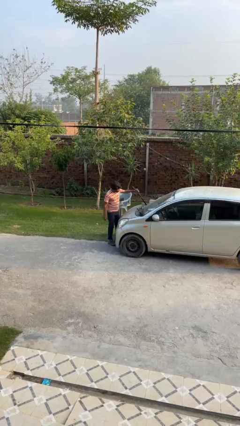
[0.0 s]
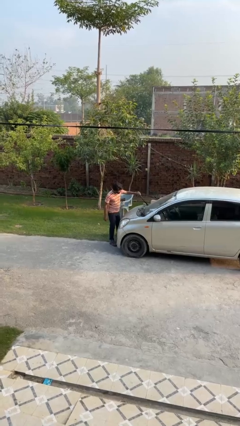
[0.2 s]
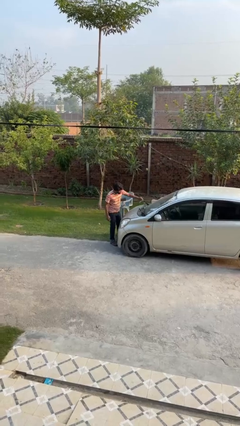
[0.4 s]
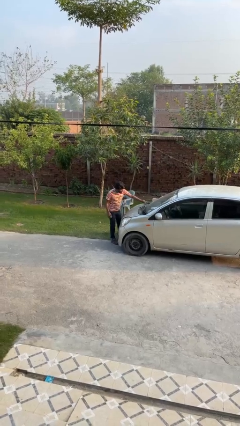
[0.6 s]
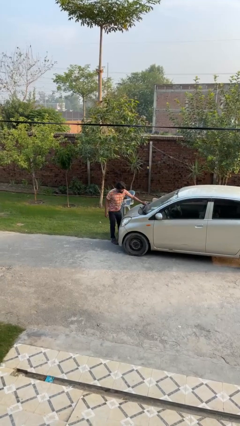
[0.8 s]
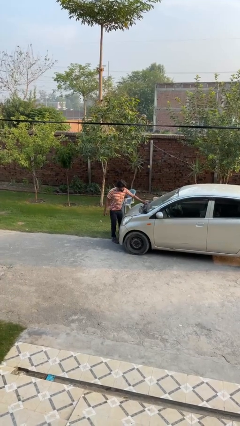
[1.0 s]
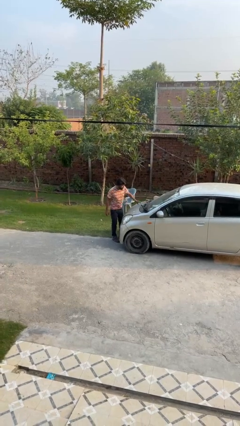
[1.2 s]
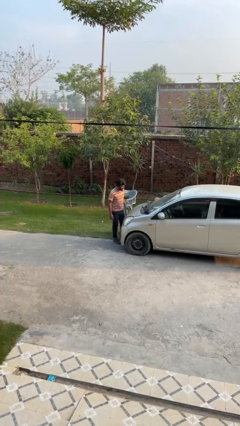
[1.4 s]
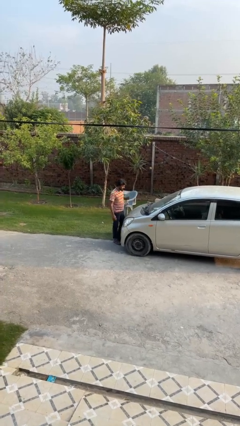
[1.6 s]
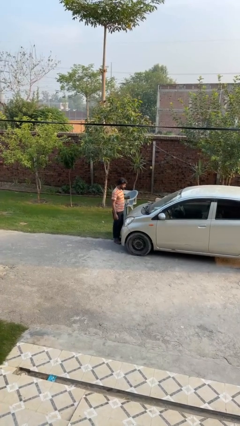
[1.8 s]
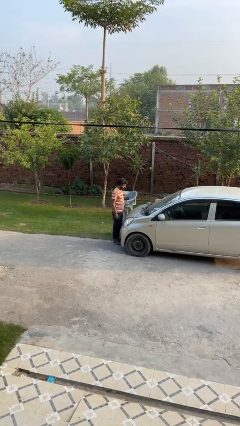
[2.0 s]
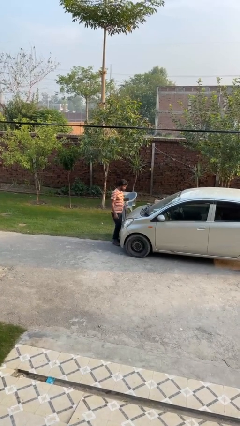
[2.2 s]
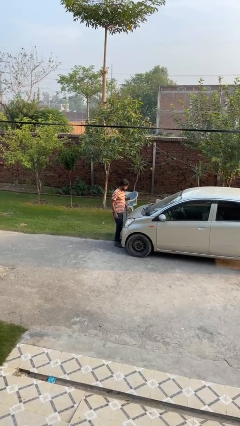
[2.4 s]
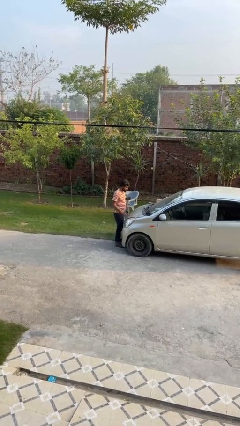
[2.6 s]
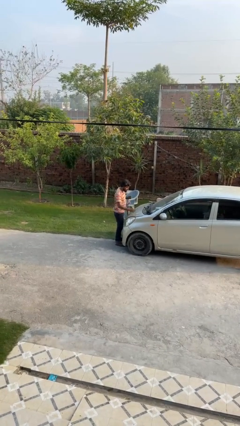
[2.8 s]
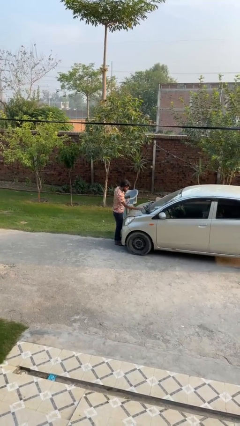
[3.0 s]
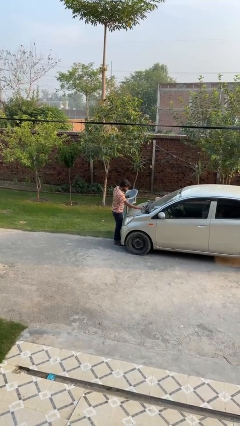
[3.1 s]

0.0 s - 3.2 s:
person flips down car wipers

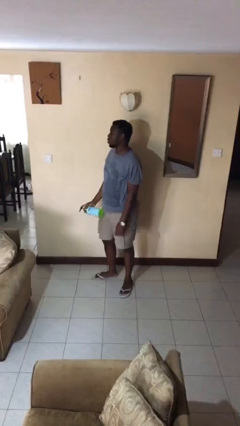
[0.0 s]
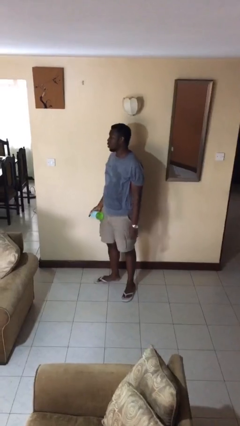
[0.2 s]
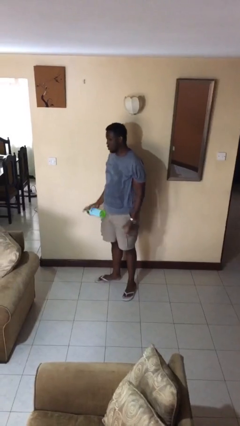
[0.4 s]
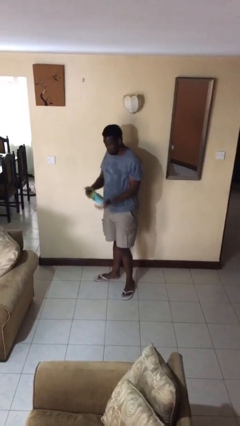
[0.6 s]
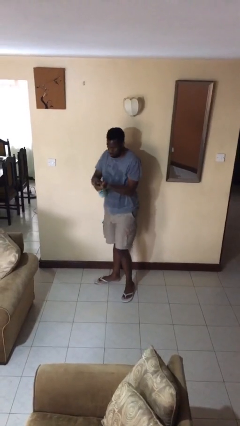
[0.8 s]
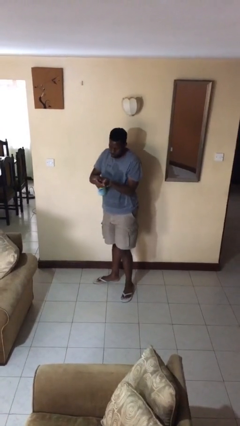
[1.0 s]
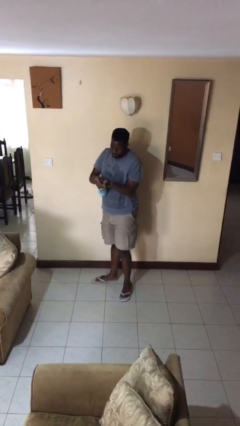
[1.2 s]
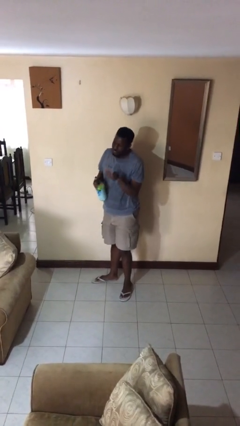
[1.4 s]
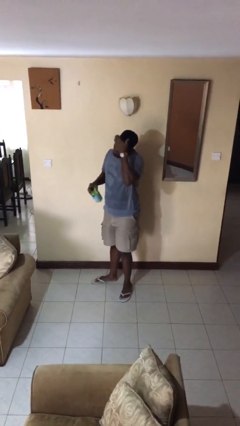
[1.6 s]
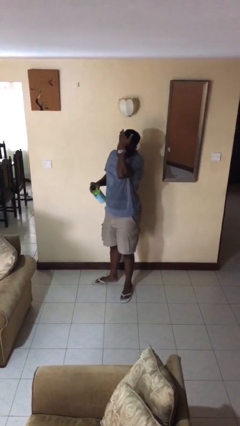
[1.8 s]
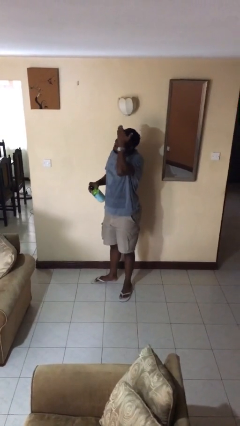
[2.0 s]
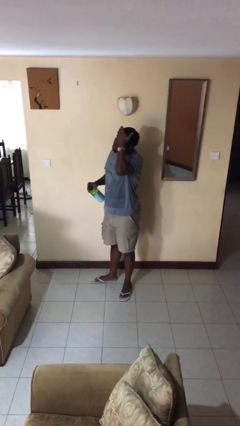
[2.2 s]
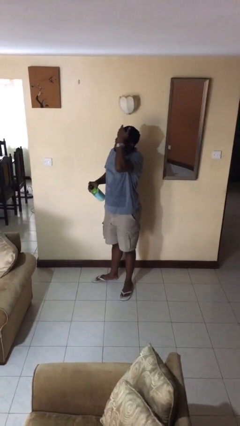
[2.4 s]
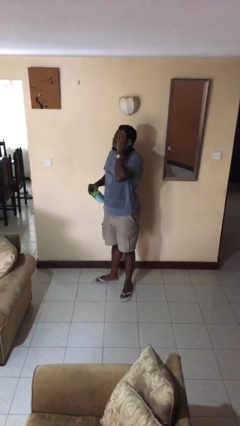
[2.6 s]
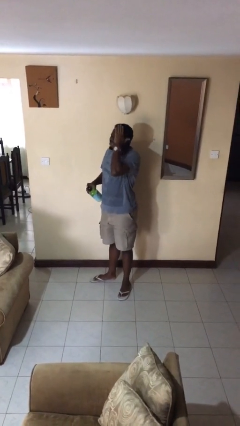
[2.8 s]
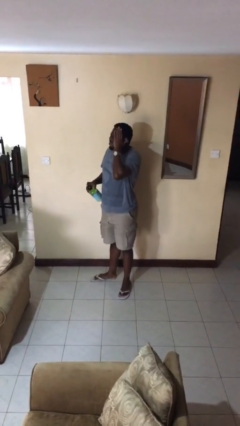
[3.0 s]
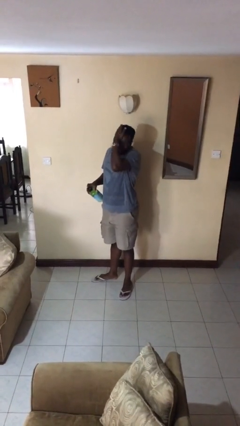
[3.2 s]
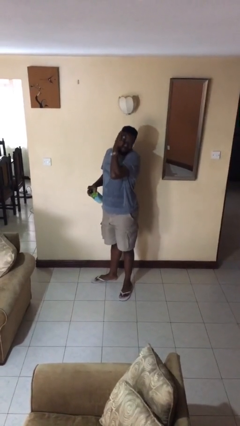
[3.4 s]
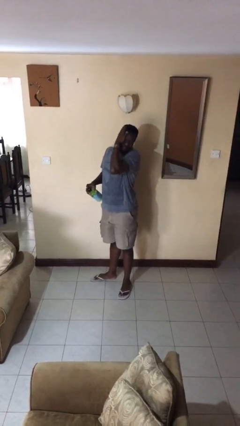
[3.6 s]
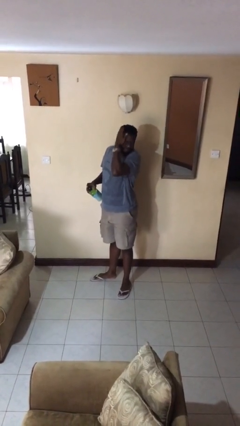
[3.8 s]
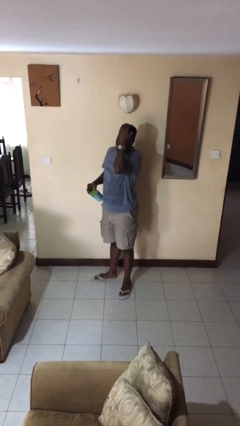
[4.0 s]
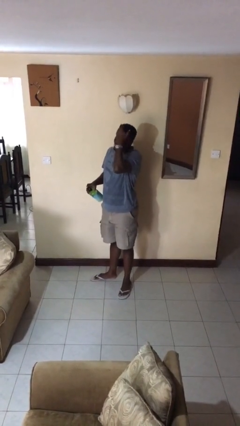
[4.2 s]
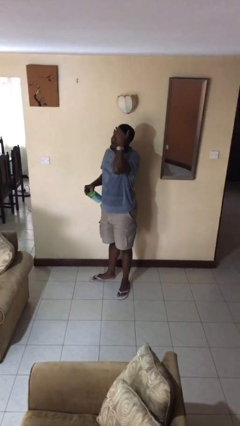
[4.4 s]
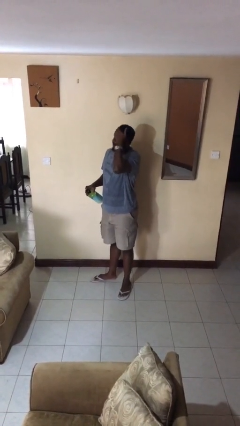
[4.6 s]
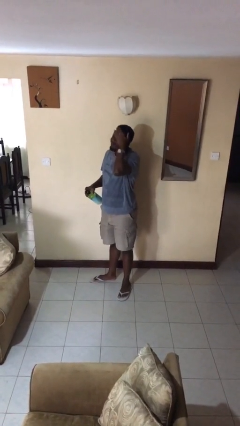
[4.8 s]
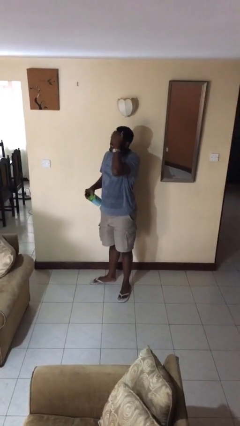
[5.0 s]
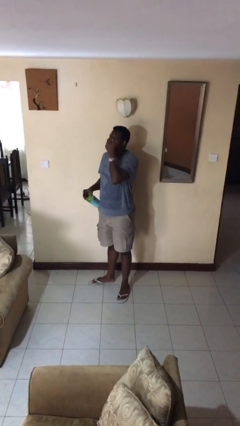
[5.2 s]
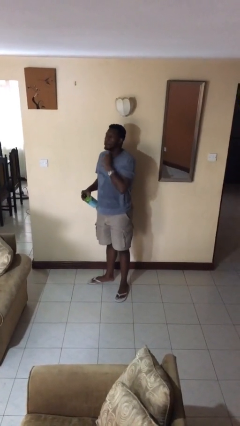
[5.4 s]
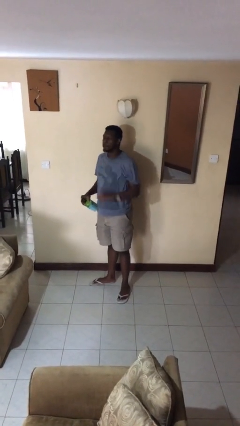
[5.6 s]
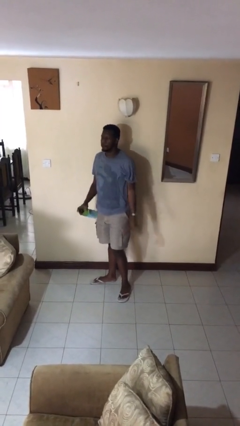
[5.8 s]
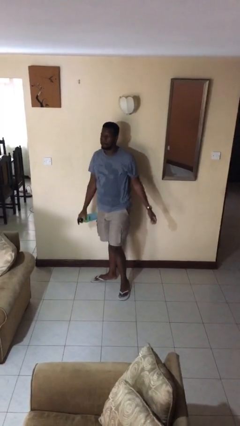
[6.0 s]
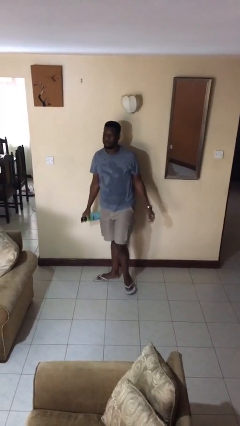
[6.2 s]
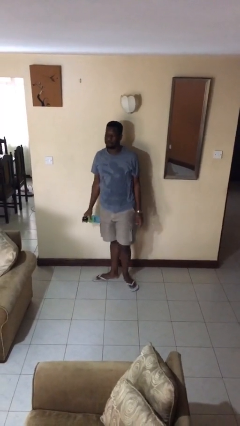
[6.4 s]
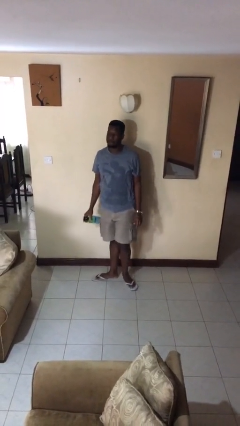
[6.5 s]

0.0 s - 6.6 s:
person applies sunscreen

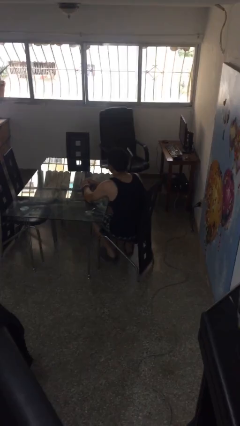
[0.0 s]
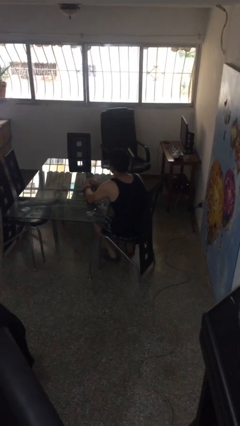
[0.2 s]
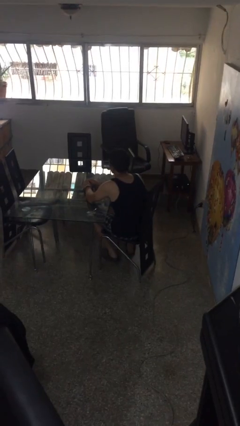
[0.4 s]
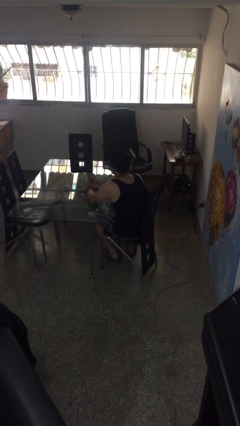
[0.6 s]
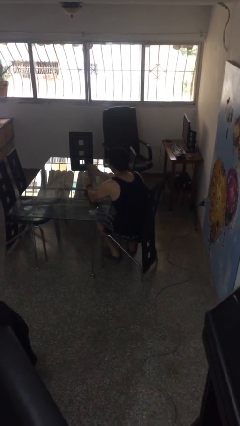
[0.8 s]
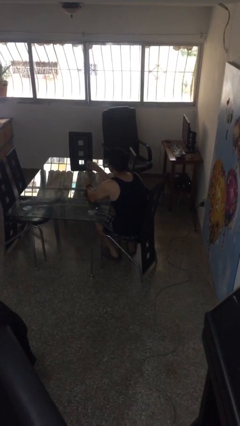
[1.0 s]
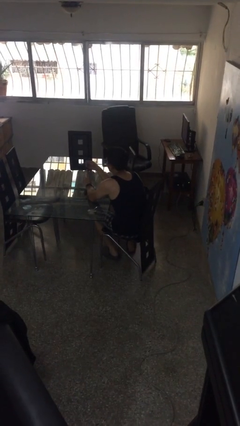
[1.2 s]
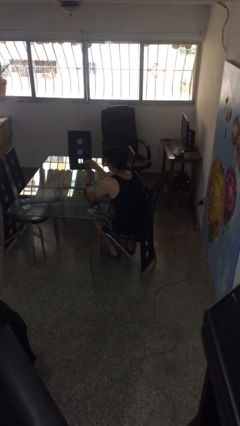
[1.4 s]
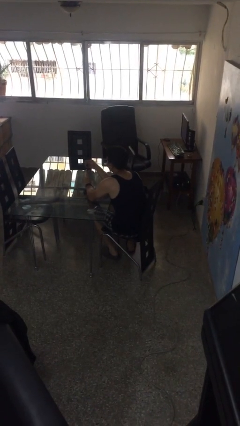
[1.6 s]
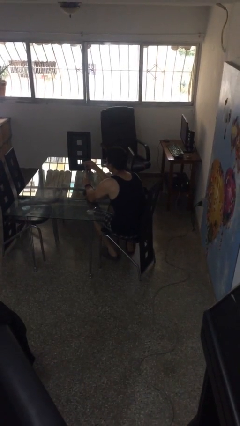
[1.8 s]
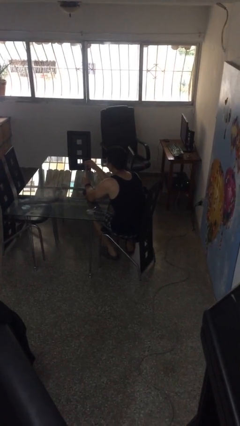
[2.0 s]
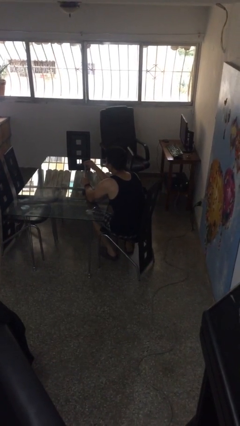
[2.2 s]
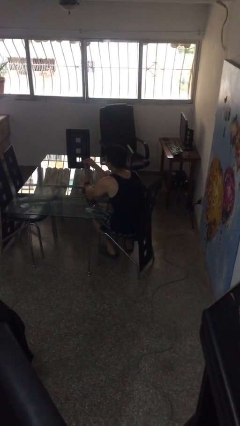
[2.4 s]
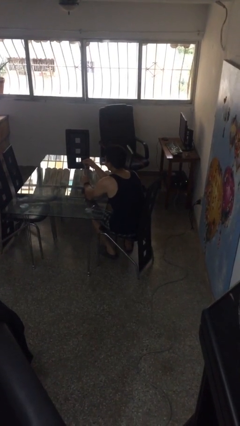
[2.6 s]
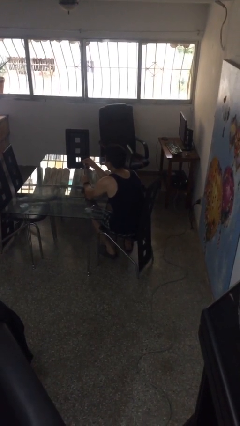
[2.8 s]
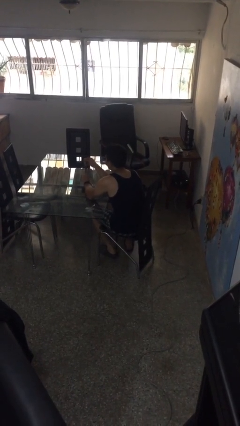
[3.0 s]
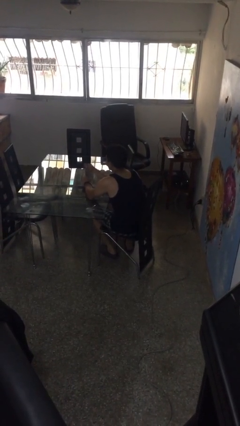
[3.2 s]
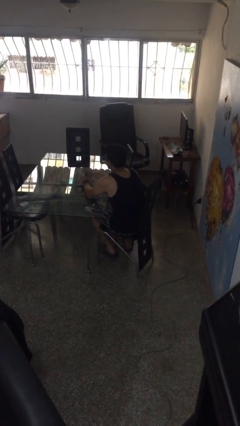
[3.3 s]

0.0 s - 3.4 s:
person clips fingernails

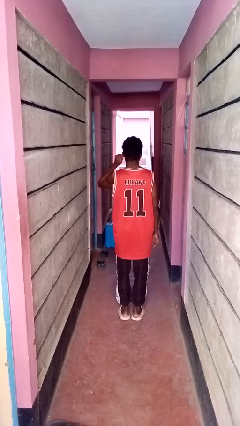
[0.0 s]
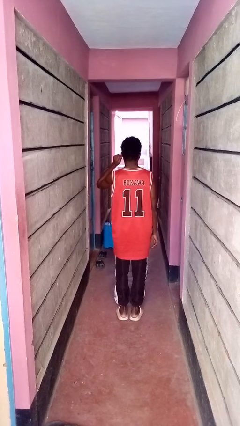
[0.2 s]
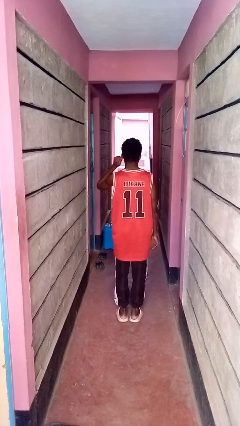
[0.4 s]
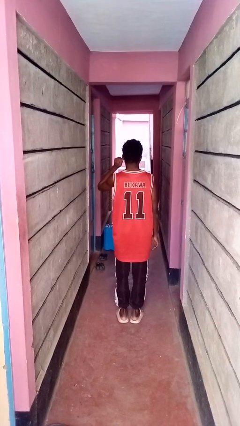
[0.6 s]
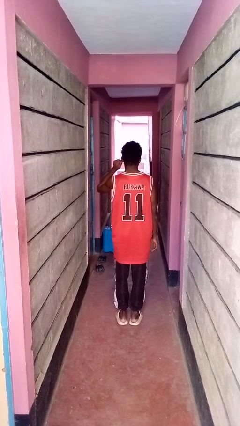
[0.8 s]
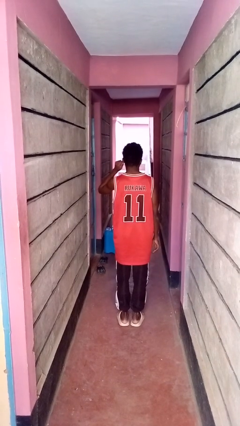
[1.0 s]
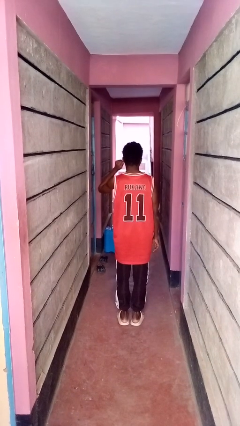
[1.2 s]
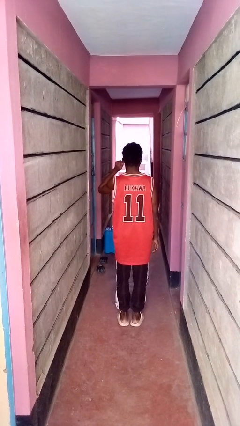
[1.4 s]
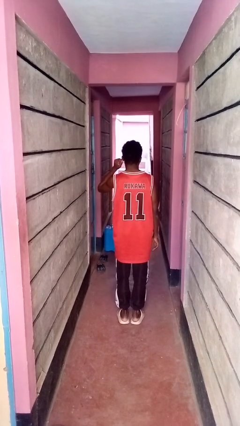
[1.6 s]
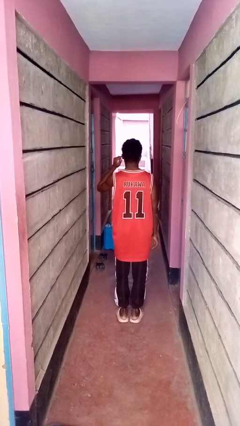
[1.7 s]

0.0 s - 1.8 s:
person touches earlobe

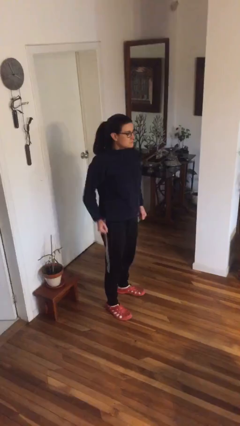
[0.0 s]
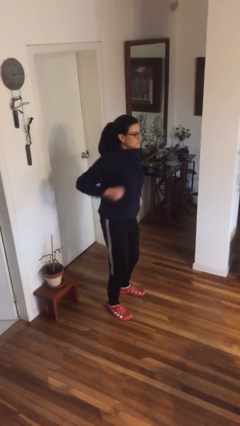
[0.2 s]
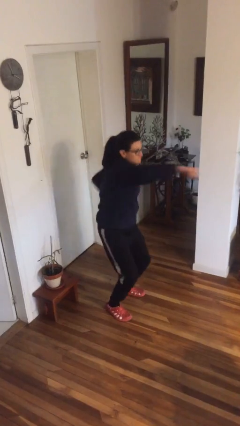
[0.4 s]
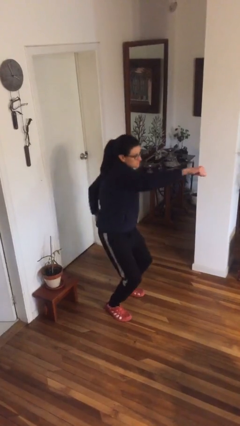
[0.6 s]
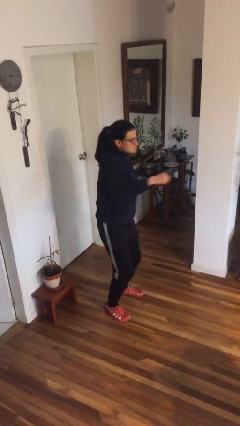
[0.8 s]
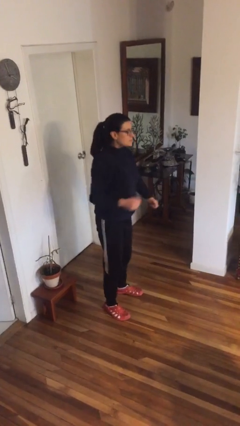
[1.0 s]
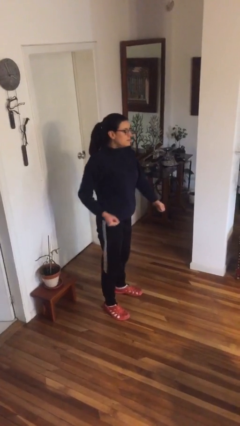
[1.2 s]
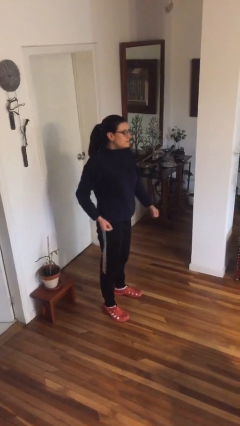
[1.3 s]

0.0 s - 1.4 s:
person punches

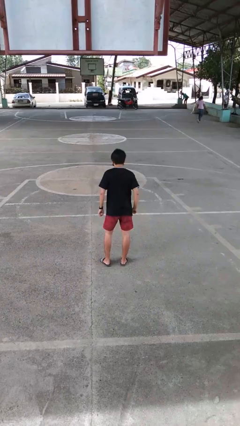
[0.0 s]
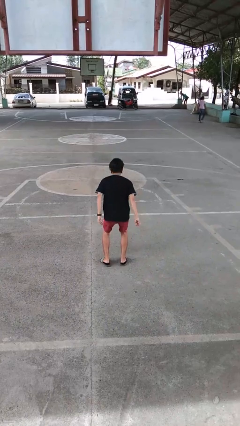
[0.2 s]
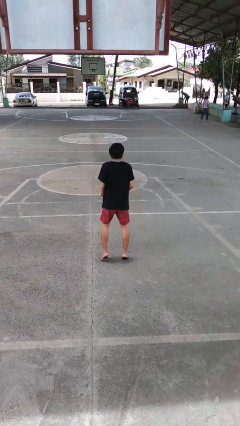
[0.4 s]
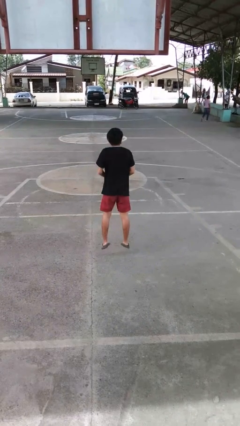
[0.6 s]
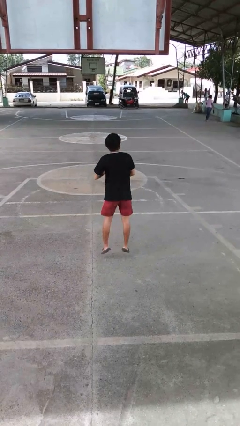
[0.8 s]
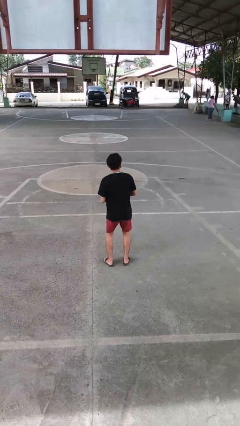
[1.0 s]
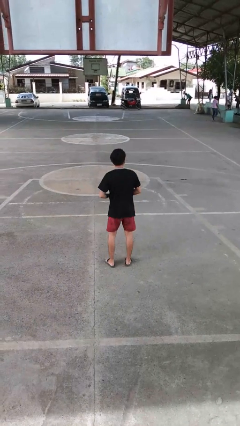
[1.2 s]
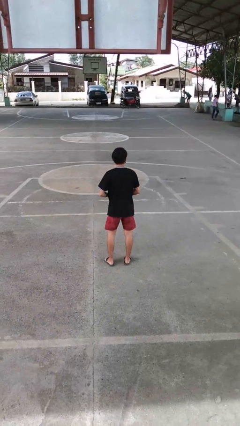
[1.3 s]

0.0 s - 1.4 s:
person jumps
